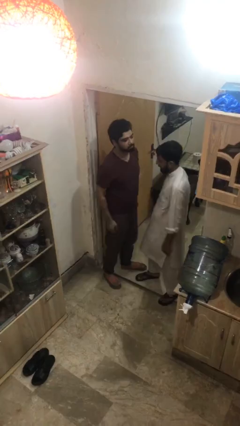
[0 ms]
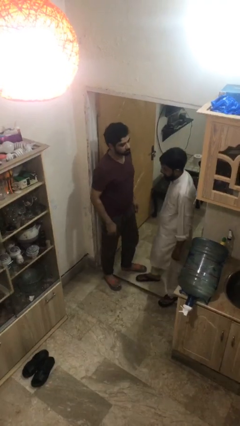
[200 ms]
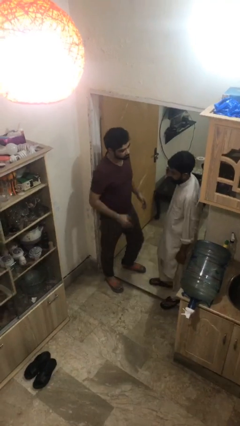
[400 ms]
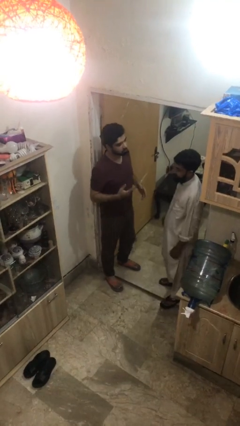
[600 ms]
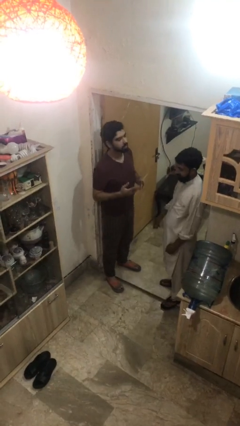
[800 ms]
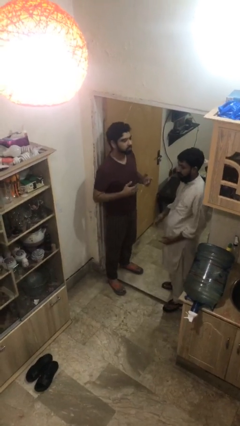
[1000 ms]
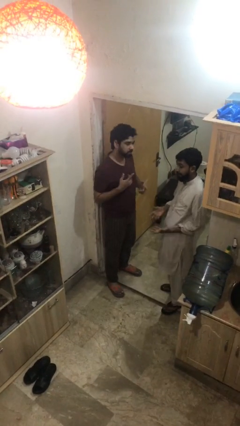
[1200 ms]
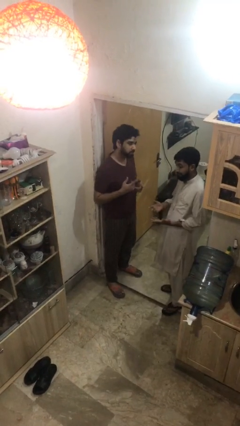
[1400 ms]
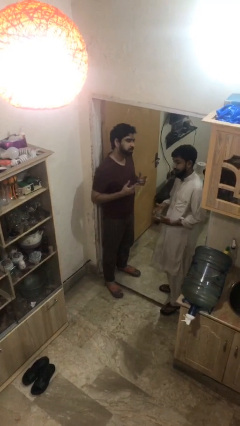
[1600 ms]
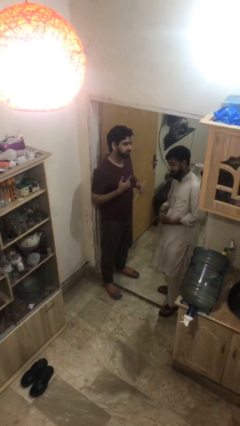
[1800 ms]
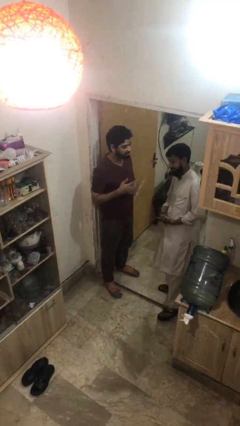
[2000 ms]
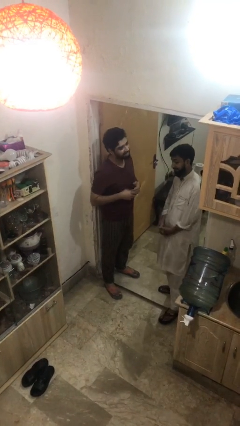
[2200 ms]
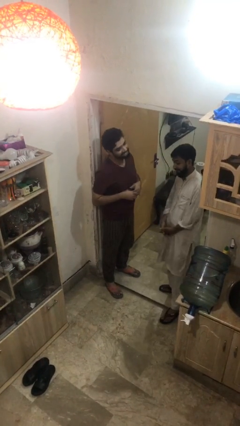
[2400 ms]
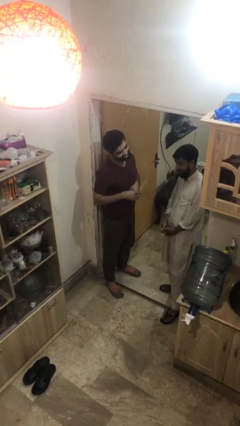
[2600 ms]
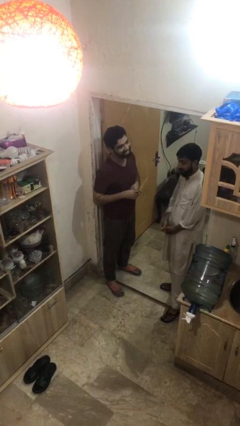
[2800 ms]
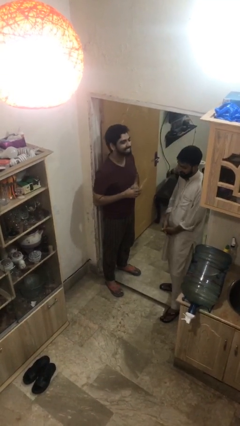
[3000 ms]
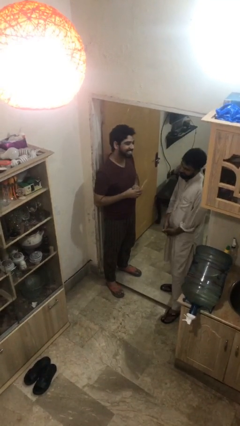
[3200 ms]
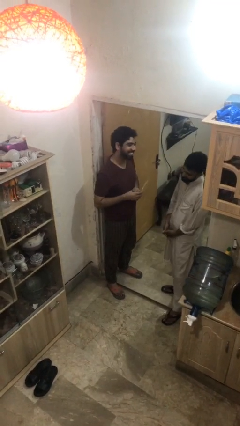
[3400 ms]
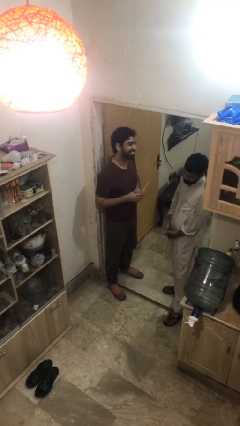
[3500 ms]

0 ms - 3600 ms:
person talks to person

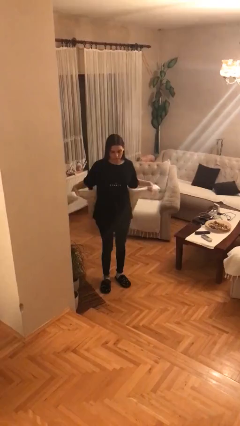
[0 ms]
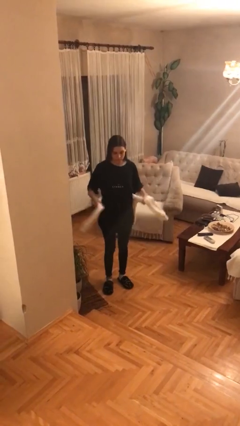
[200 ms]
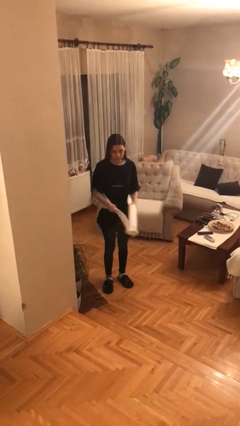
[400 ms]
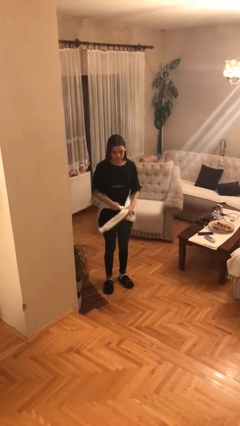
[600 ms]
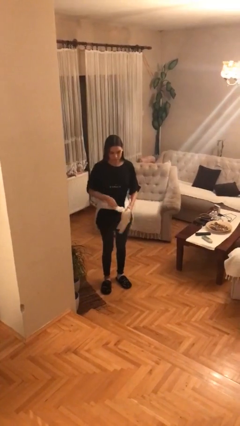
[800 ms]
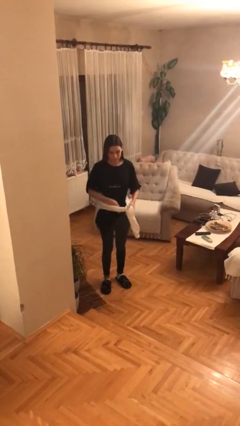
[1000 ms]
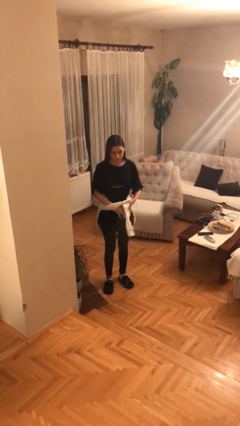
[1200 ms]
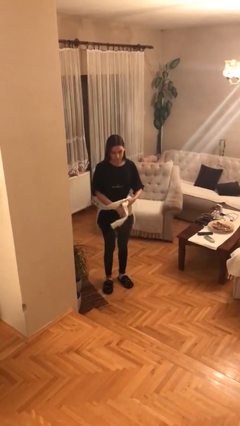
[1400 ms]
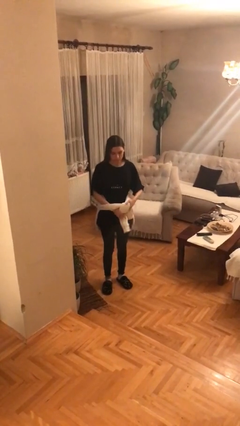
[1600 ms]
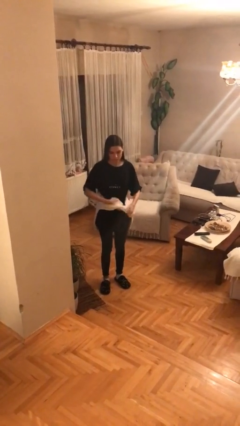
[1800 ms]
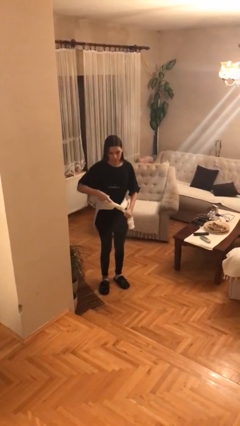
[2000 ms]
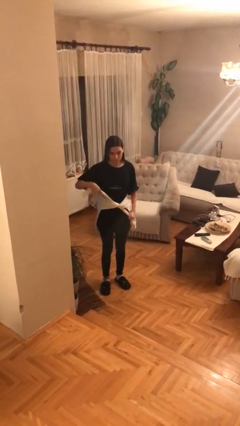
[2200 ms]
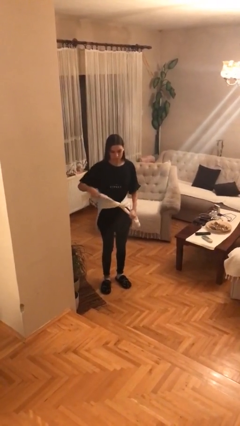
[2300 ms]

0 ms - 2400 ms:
person ties jacket around waist

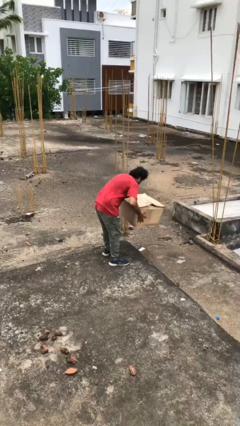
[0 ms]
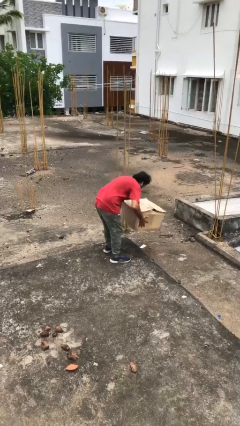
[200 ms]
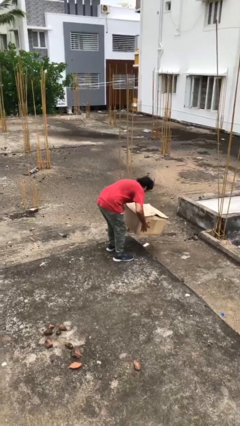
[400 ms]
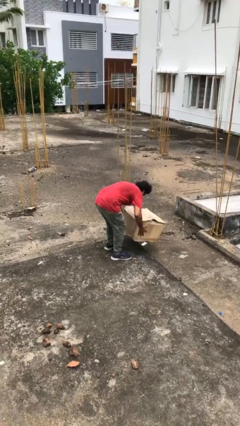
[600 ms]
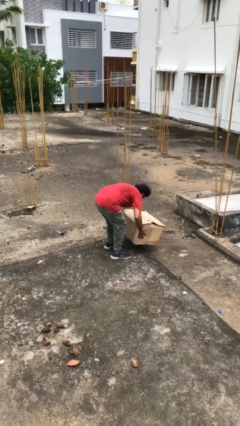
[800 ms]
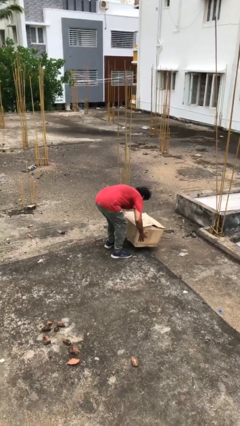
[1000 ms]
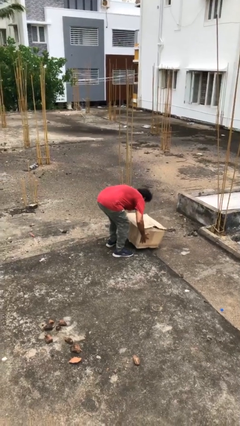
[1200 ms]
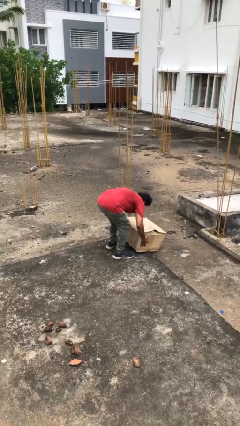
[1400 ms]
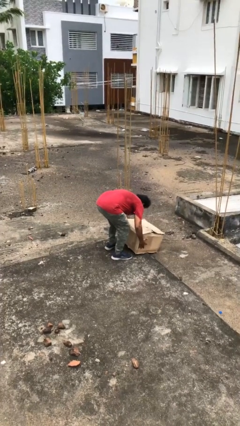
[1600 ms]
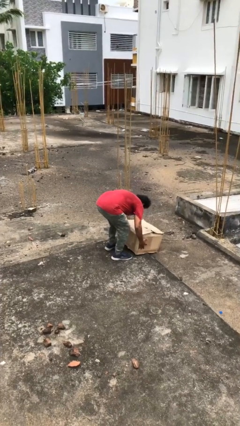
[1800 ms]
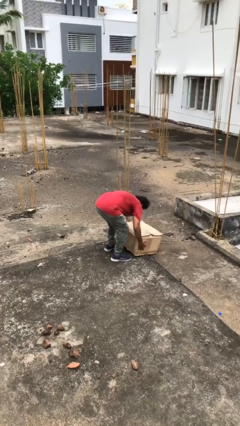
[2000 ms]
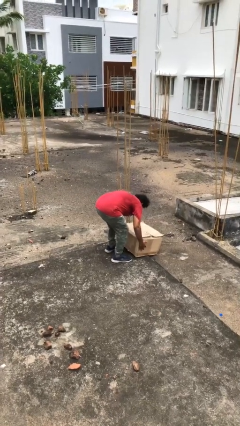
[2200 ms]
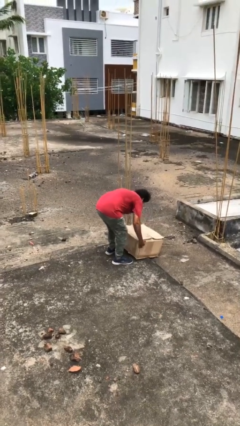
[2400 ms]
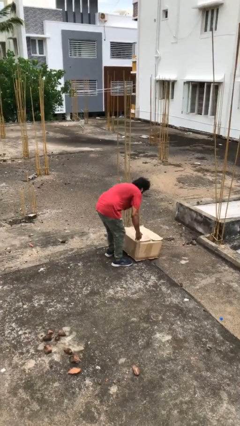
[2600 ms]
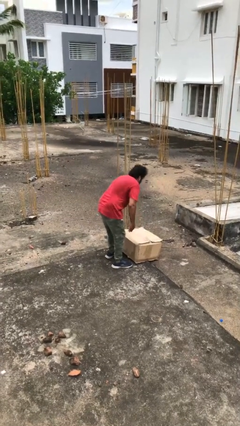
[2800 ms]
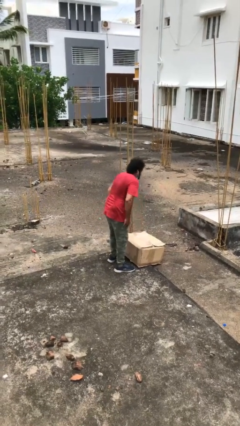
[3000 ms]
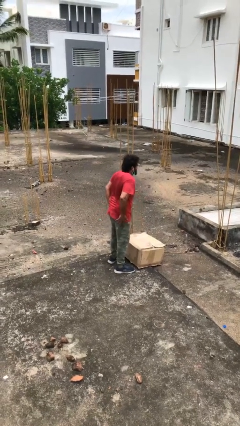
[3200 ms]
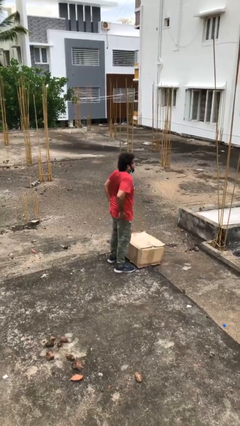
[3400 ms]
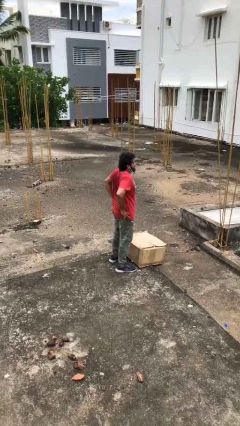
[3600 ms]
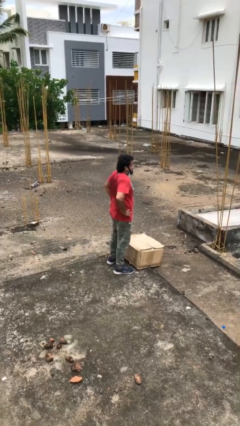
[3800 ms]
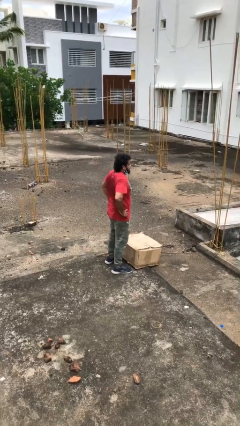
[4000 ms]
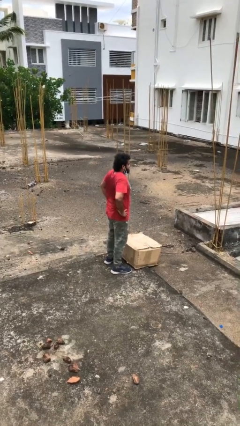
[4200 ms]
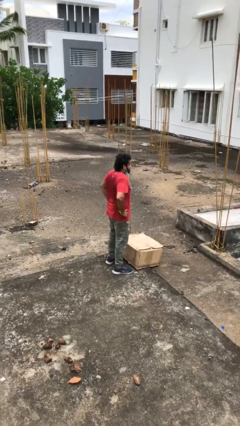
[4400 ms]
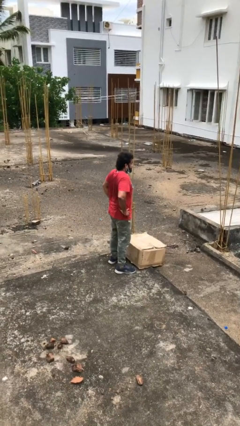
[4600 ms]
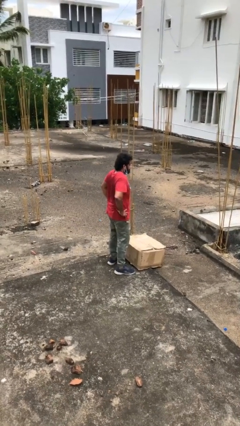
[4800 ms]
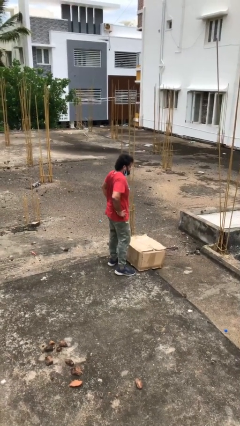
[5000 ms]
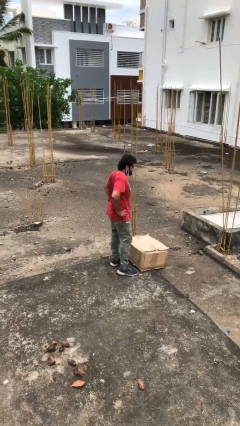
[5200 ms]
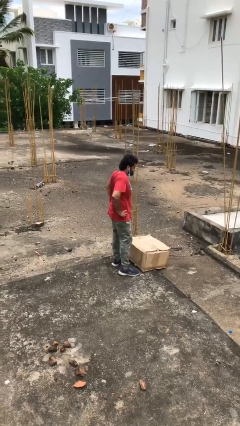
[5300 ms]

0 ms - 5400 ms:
person puts down object on floor

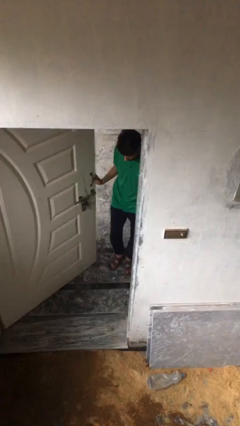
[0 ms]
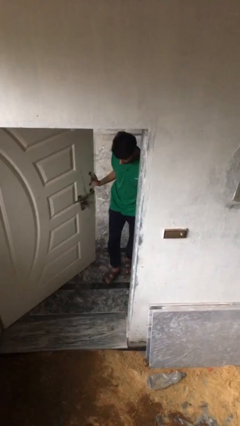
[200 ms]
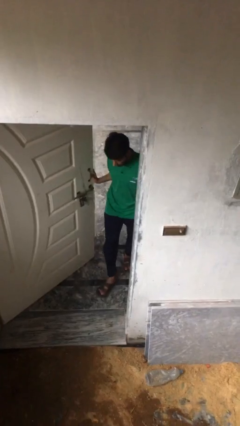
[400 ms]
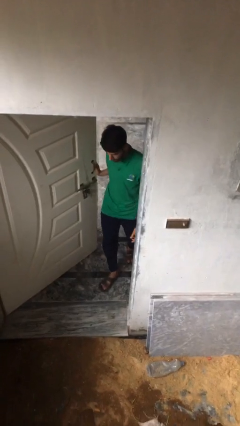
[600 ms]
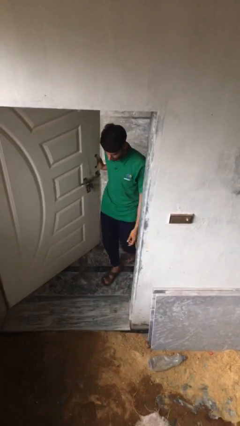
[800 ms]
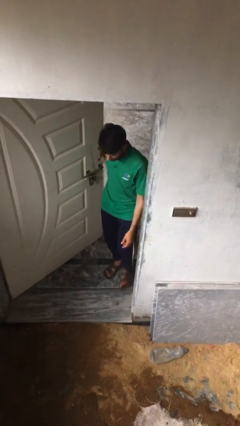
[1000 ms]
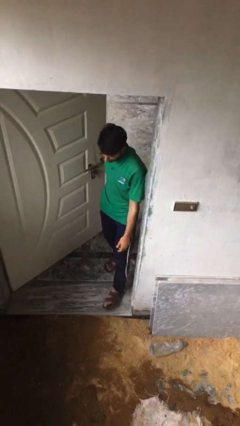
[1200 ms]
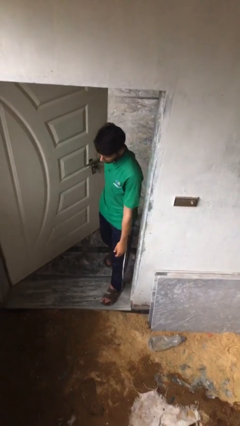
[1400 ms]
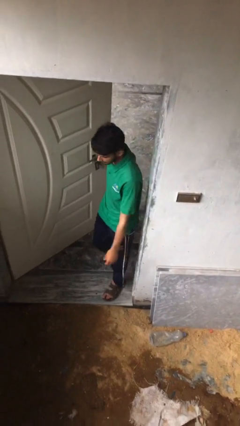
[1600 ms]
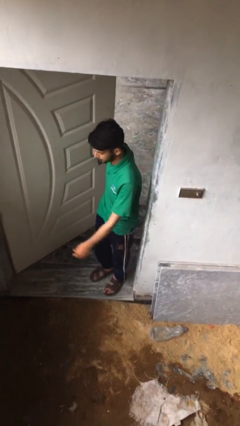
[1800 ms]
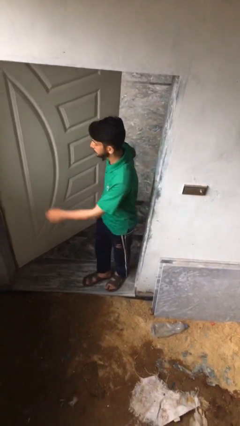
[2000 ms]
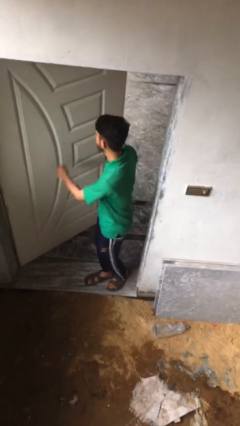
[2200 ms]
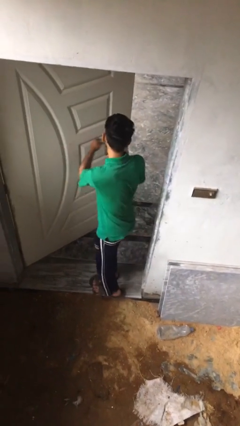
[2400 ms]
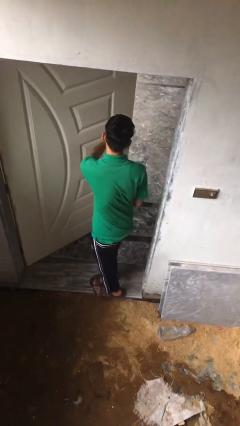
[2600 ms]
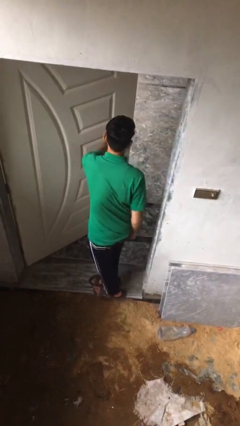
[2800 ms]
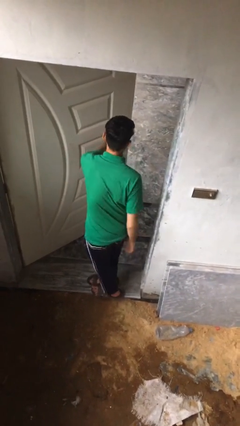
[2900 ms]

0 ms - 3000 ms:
person enters scene through structure

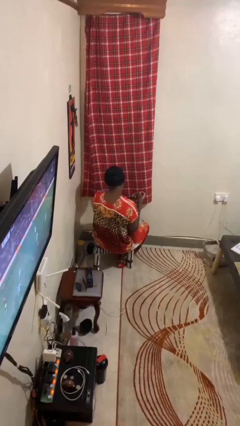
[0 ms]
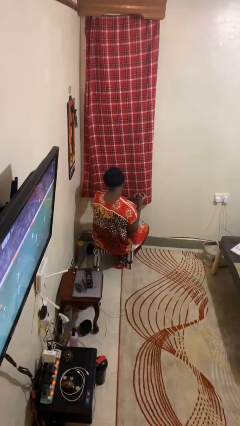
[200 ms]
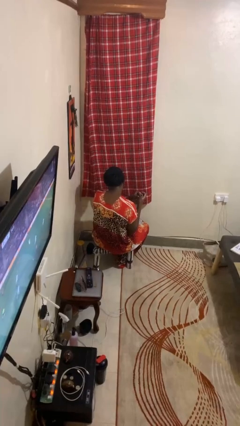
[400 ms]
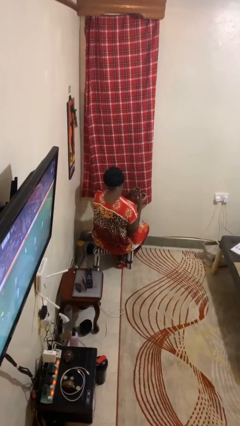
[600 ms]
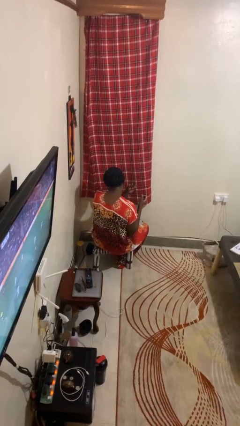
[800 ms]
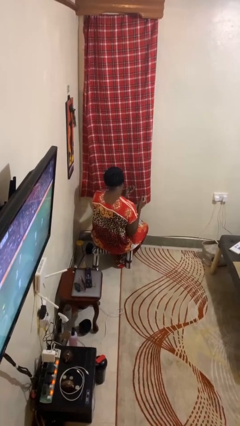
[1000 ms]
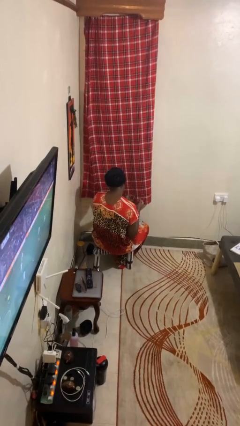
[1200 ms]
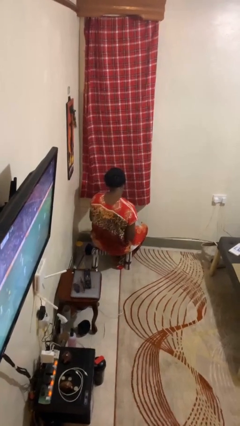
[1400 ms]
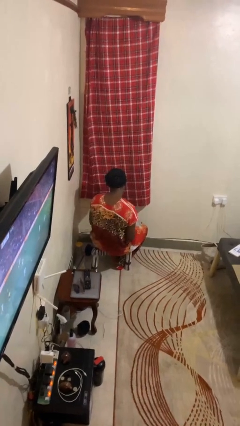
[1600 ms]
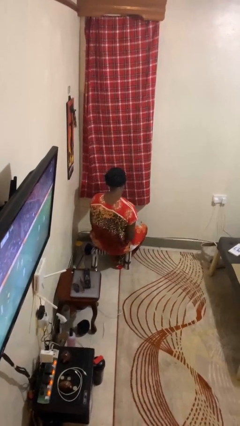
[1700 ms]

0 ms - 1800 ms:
person takes off ring

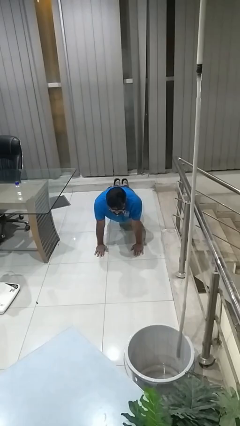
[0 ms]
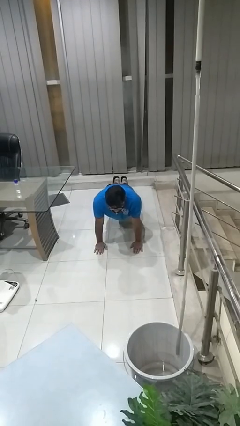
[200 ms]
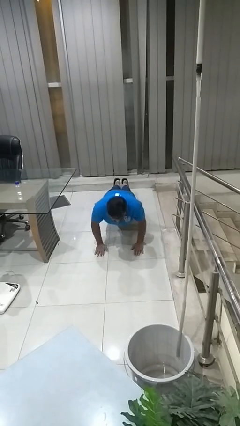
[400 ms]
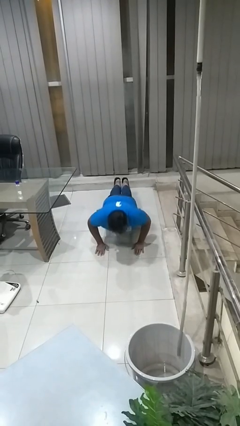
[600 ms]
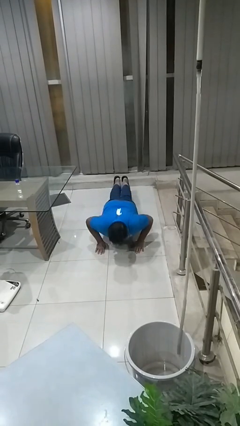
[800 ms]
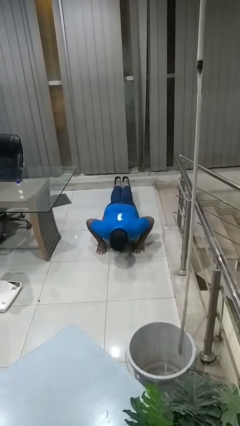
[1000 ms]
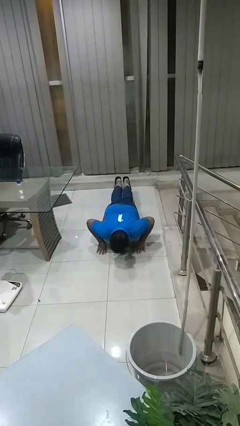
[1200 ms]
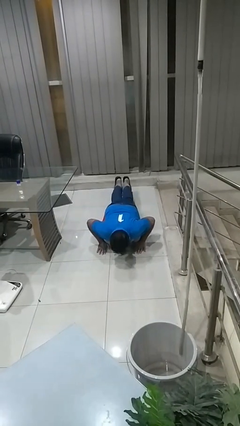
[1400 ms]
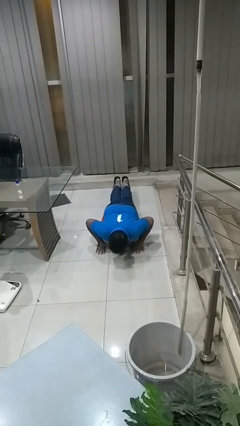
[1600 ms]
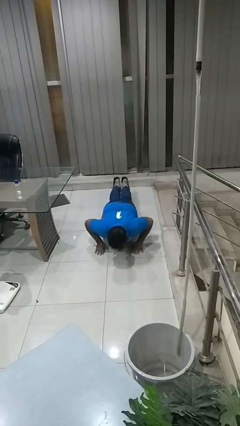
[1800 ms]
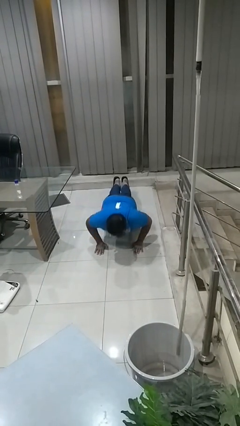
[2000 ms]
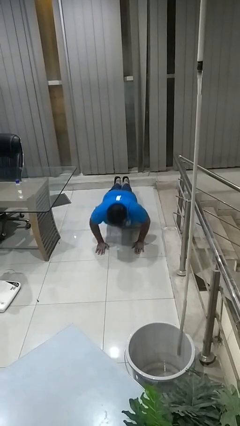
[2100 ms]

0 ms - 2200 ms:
person exercises with pushup
